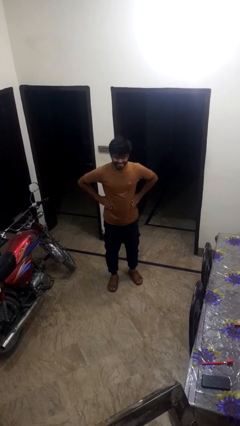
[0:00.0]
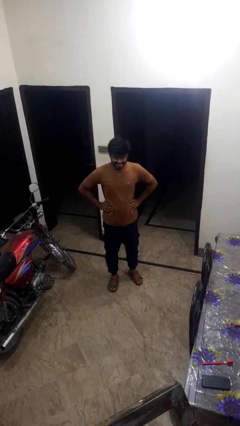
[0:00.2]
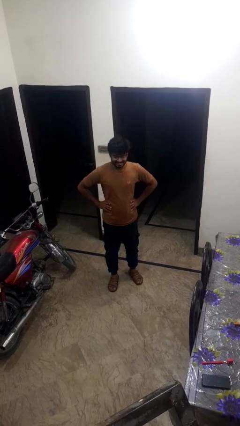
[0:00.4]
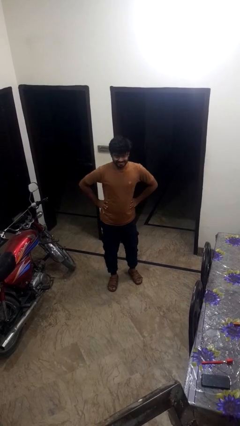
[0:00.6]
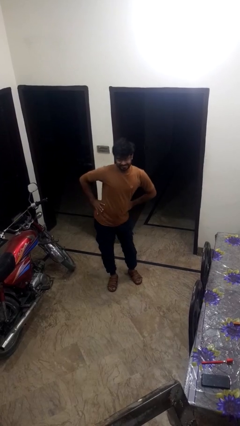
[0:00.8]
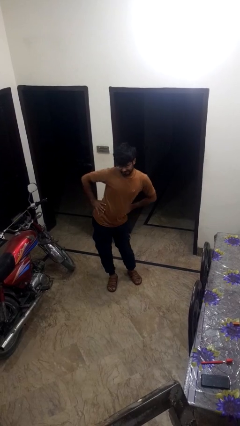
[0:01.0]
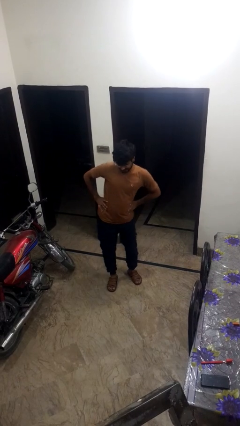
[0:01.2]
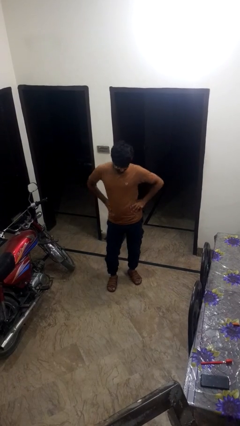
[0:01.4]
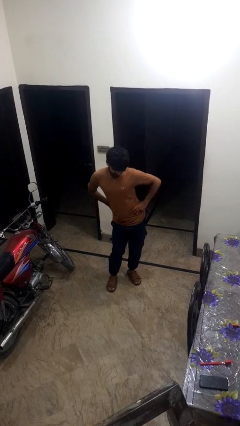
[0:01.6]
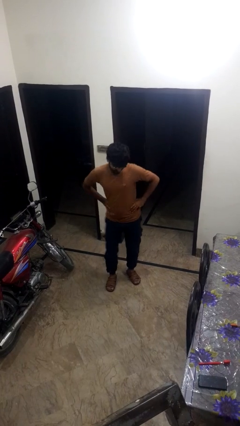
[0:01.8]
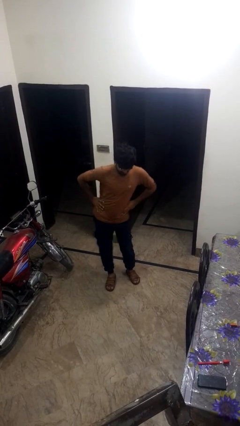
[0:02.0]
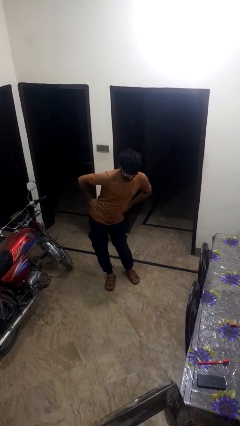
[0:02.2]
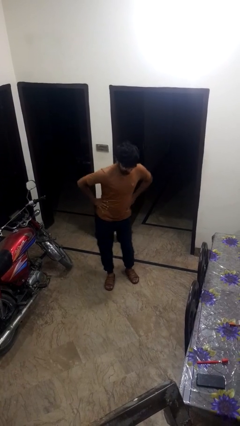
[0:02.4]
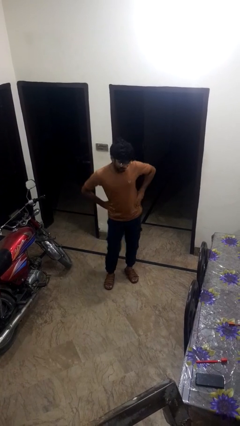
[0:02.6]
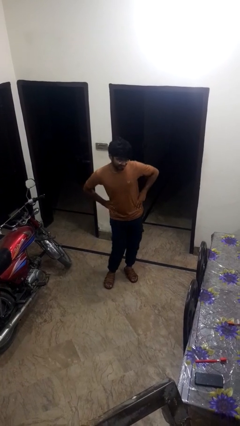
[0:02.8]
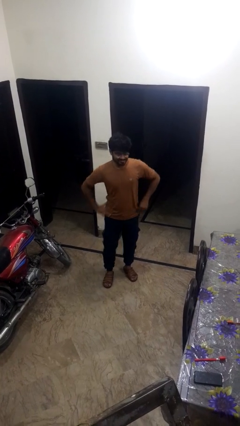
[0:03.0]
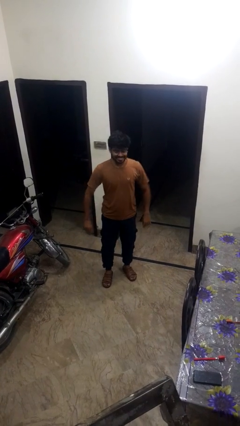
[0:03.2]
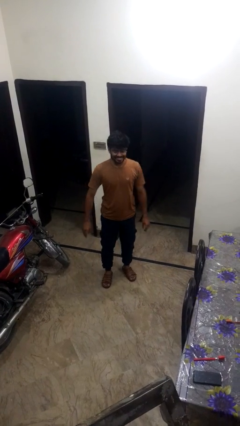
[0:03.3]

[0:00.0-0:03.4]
person wiggles hips

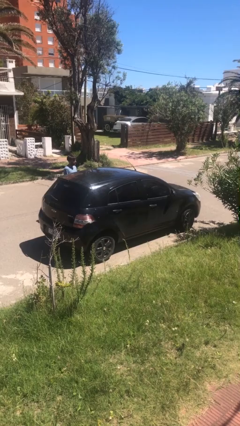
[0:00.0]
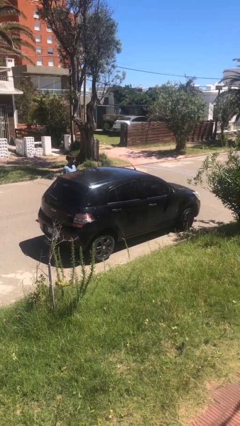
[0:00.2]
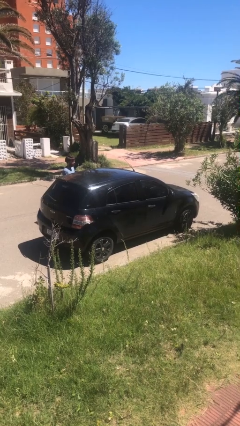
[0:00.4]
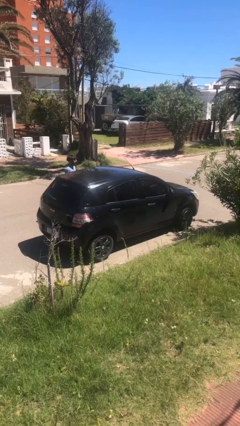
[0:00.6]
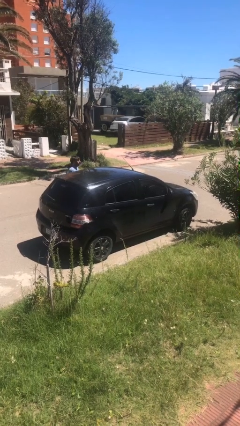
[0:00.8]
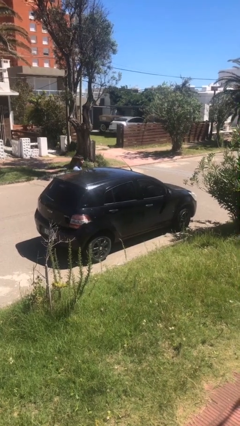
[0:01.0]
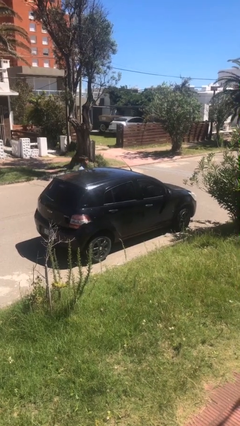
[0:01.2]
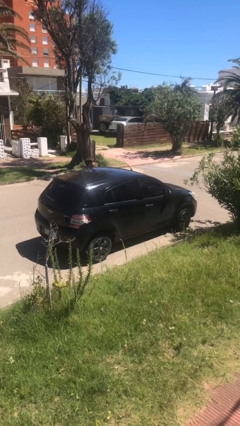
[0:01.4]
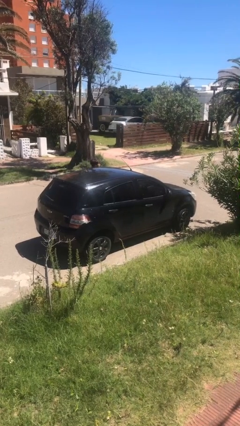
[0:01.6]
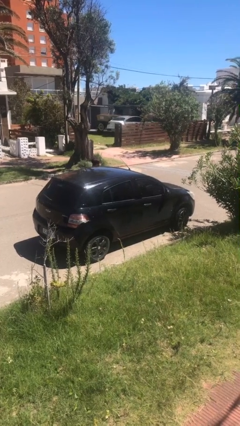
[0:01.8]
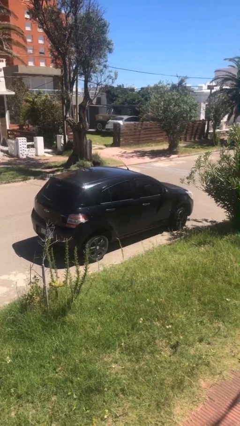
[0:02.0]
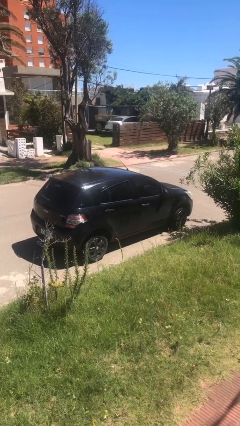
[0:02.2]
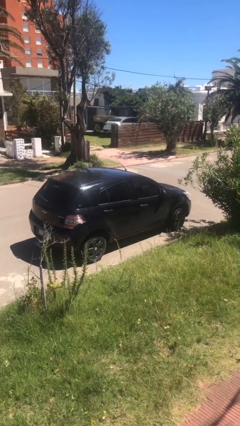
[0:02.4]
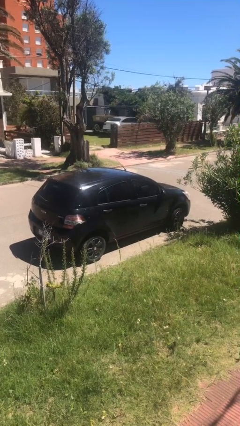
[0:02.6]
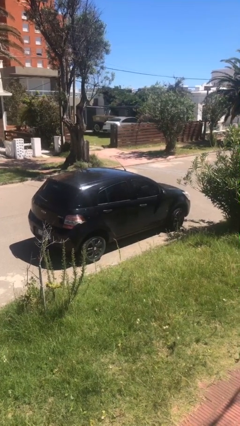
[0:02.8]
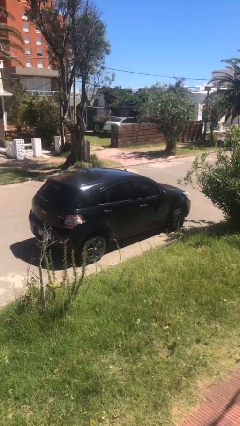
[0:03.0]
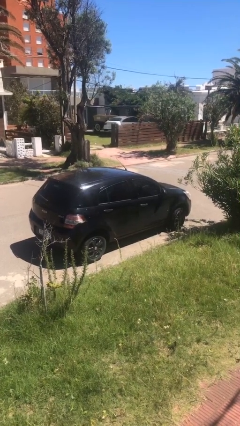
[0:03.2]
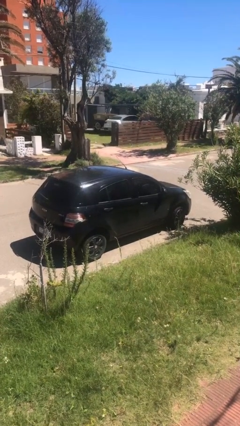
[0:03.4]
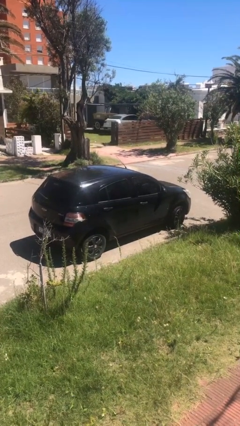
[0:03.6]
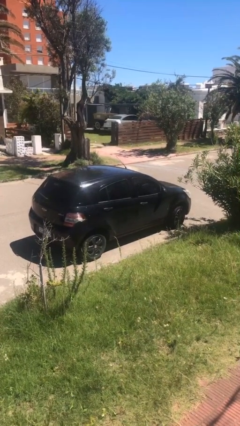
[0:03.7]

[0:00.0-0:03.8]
car picks up person

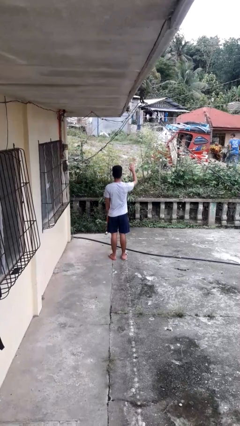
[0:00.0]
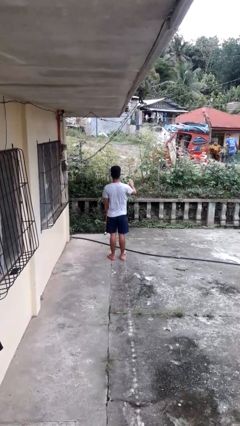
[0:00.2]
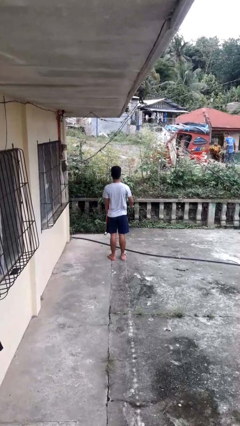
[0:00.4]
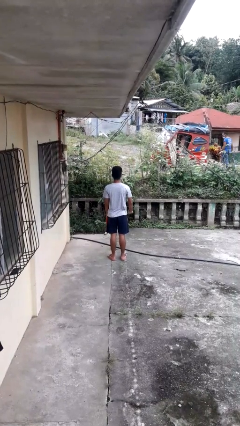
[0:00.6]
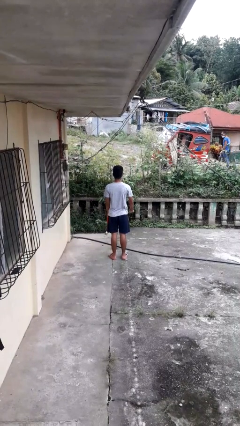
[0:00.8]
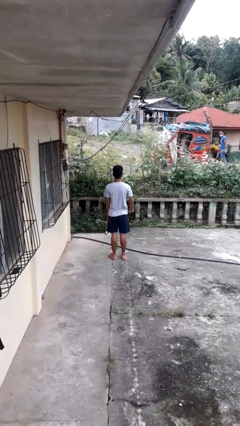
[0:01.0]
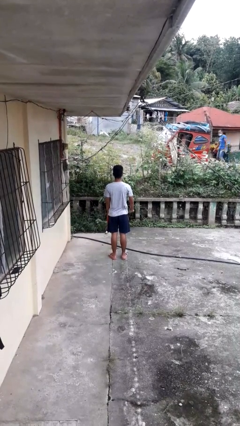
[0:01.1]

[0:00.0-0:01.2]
person gestures swipe down

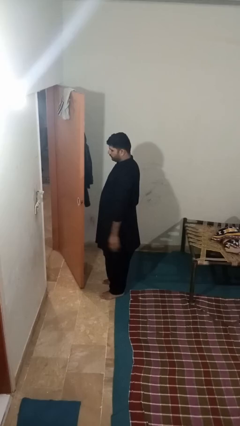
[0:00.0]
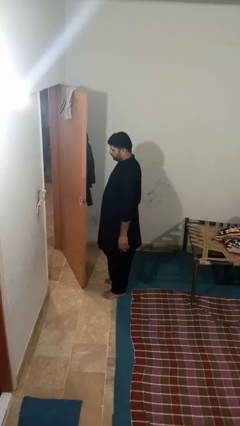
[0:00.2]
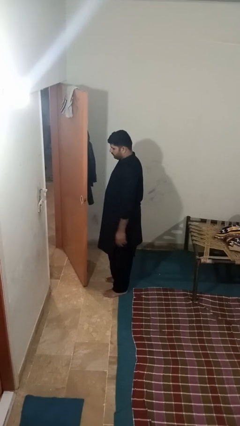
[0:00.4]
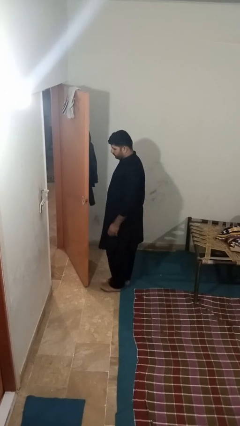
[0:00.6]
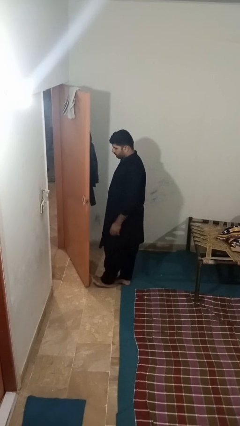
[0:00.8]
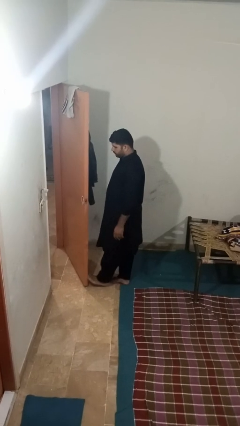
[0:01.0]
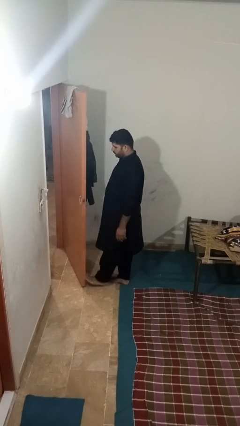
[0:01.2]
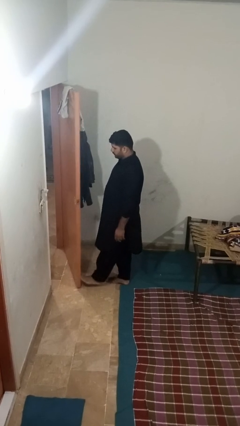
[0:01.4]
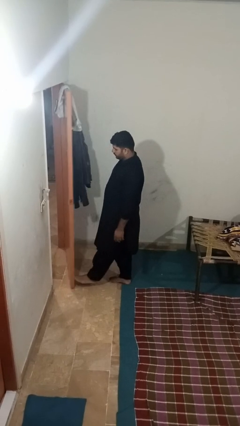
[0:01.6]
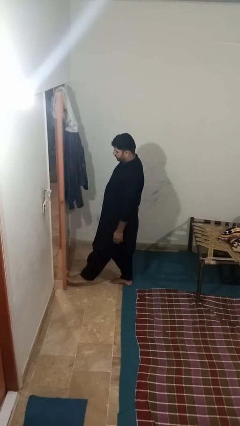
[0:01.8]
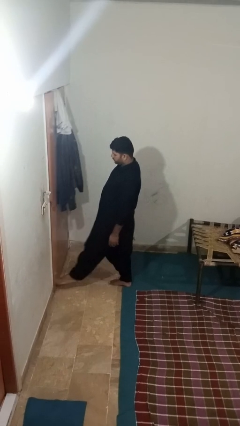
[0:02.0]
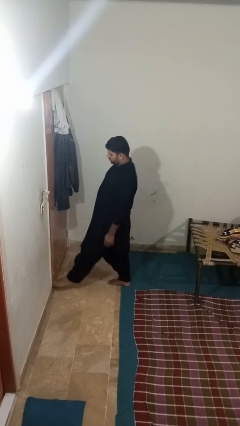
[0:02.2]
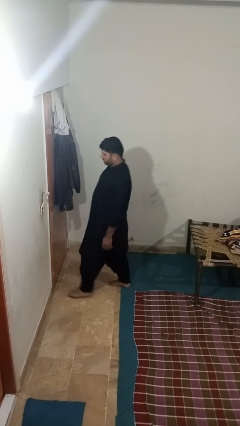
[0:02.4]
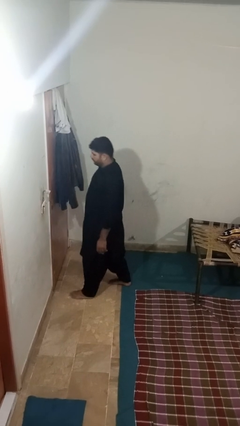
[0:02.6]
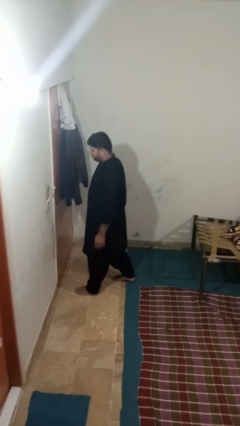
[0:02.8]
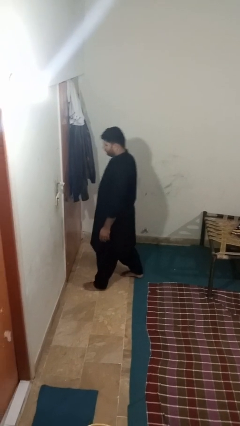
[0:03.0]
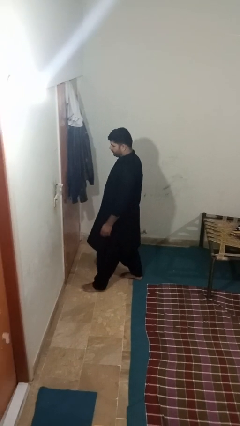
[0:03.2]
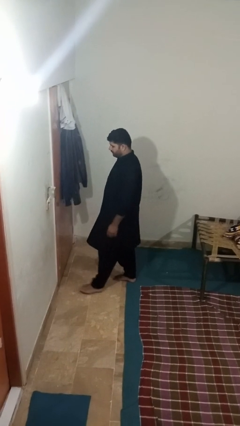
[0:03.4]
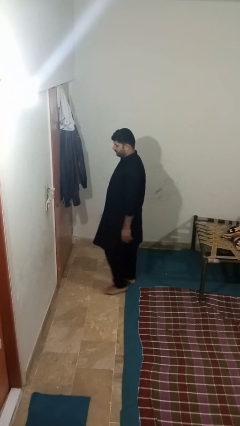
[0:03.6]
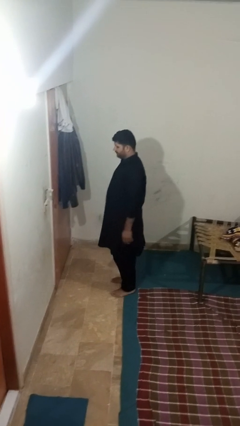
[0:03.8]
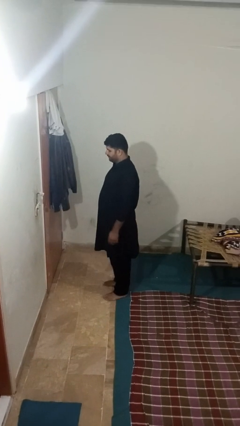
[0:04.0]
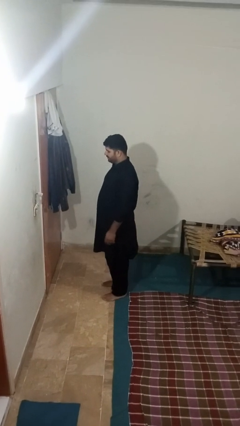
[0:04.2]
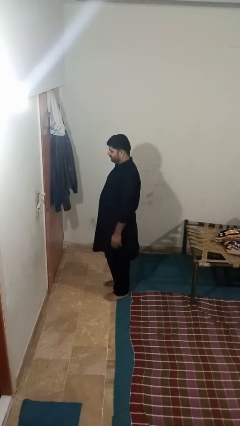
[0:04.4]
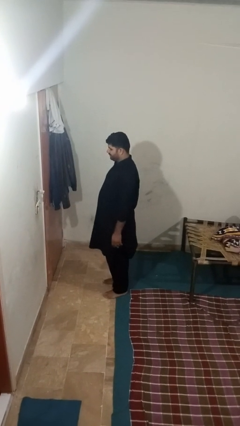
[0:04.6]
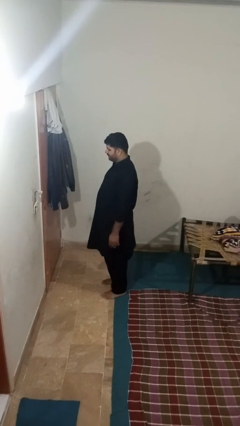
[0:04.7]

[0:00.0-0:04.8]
person closes door with foot

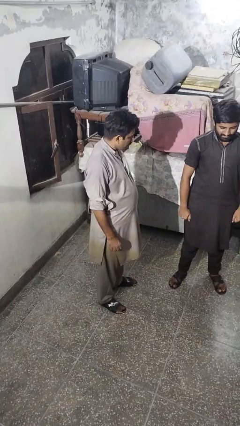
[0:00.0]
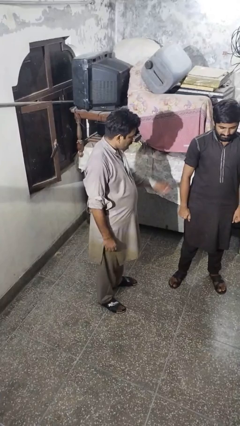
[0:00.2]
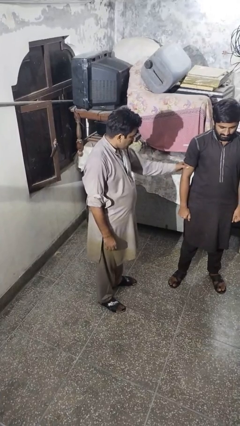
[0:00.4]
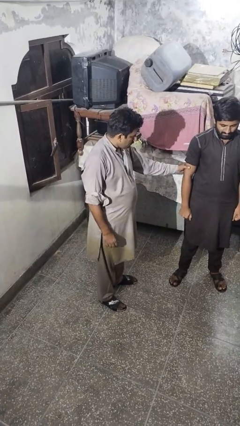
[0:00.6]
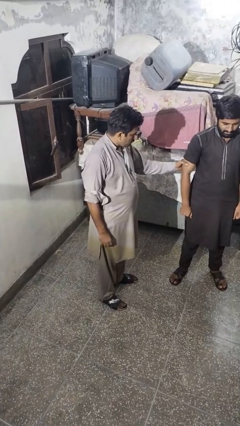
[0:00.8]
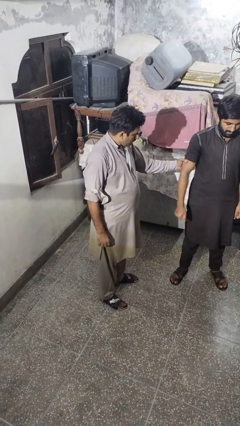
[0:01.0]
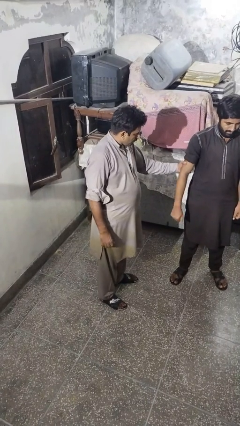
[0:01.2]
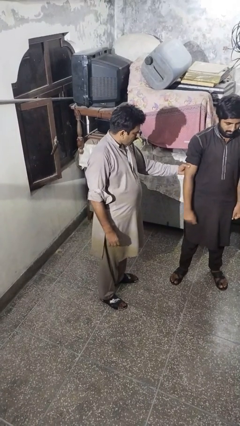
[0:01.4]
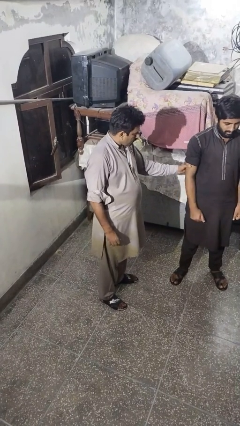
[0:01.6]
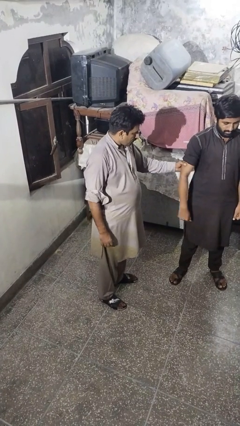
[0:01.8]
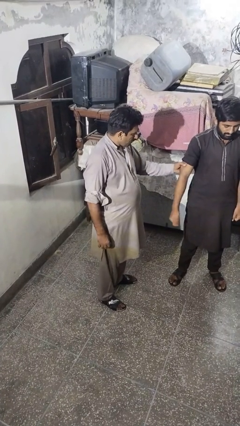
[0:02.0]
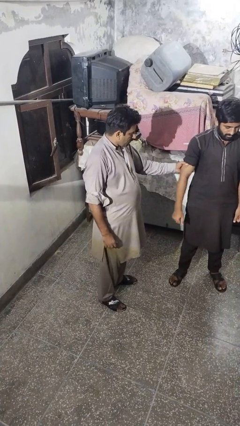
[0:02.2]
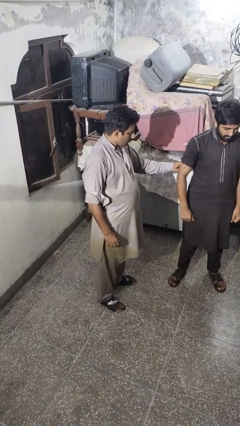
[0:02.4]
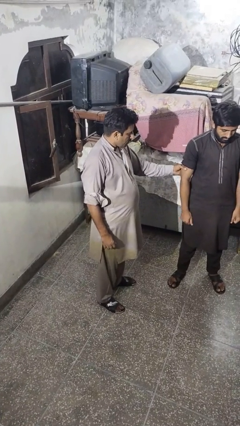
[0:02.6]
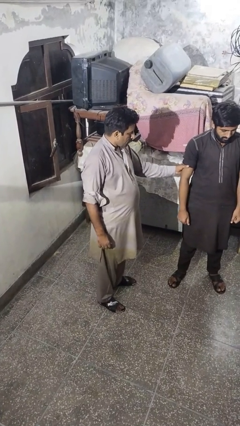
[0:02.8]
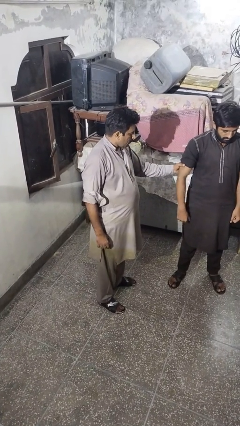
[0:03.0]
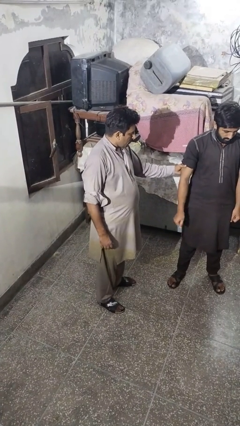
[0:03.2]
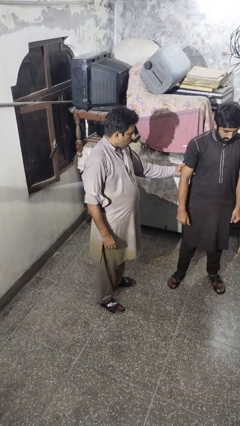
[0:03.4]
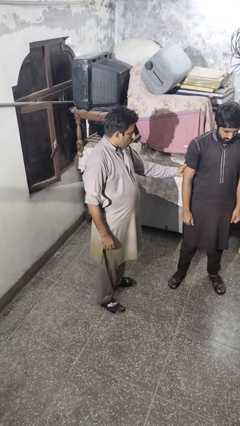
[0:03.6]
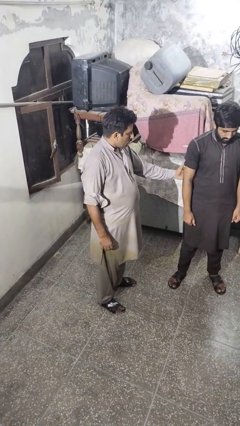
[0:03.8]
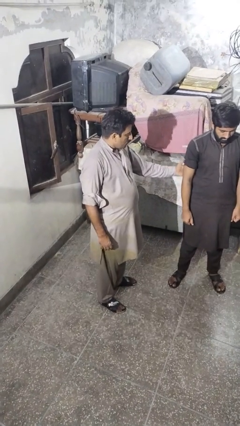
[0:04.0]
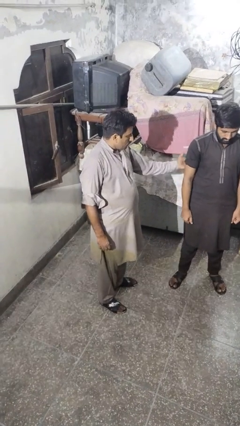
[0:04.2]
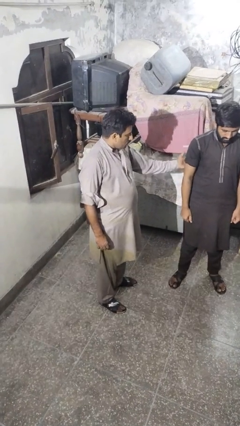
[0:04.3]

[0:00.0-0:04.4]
person grabs person by bicep
